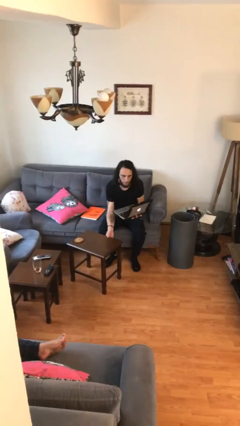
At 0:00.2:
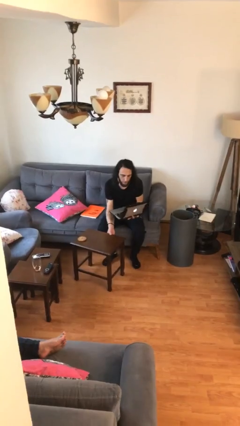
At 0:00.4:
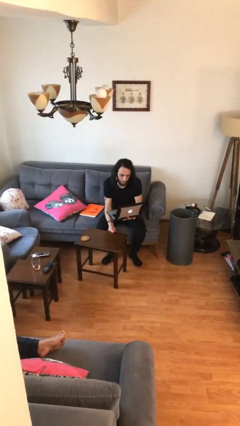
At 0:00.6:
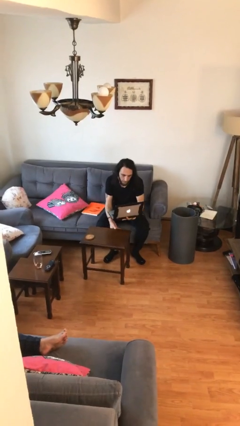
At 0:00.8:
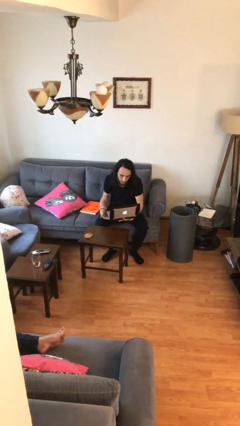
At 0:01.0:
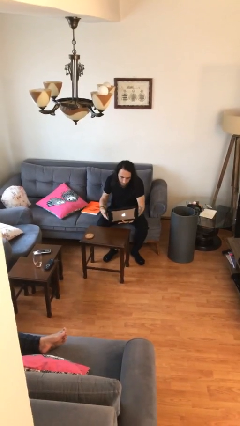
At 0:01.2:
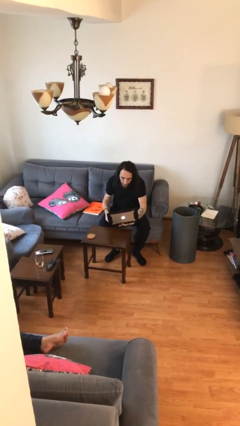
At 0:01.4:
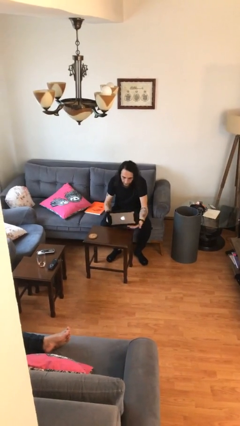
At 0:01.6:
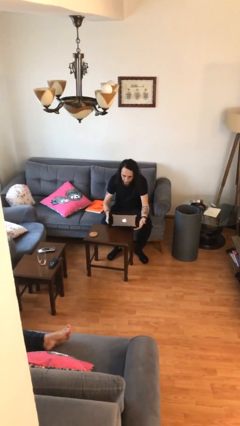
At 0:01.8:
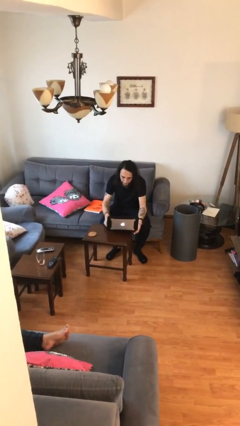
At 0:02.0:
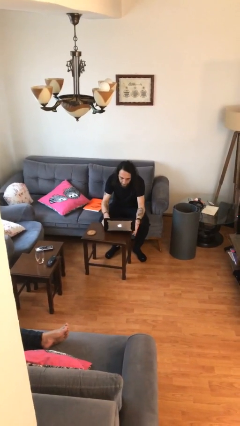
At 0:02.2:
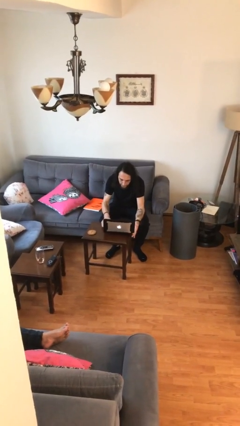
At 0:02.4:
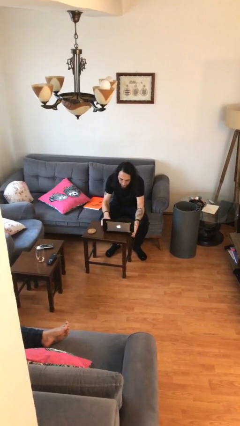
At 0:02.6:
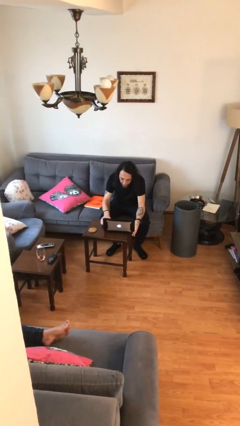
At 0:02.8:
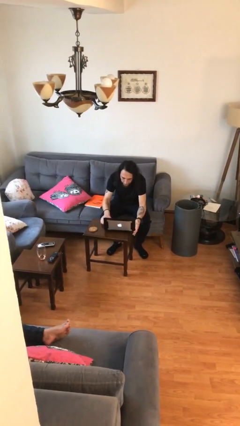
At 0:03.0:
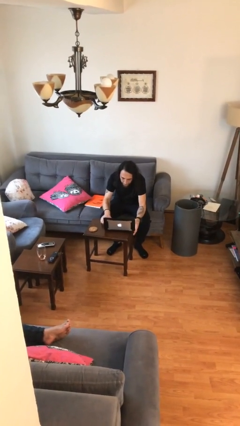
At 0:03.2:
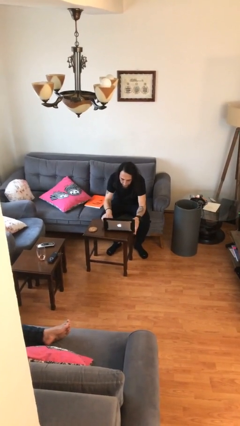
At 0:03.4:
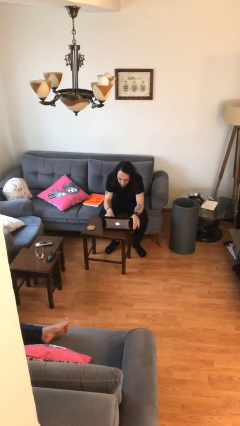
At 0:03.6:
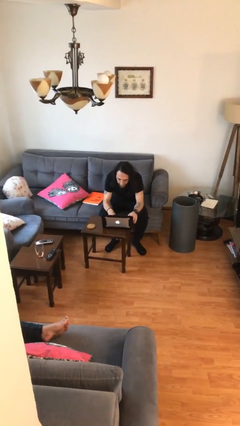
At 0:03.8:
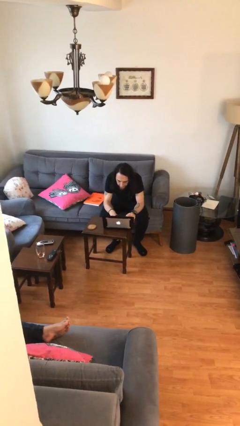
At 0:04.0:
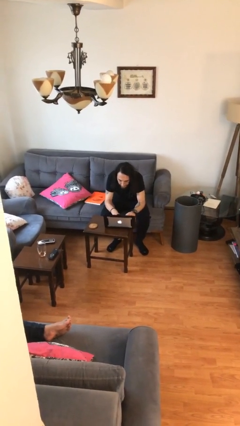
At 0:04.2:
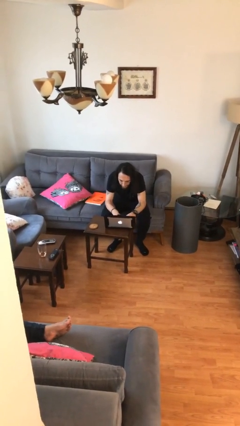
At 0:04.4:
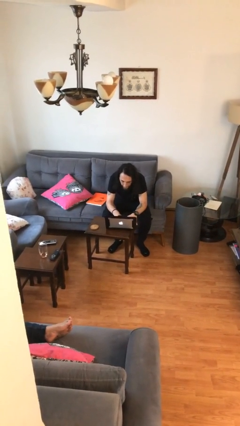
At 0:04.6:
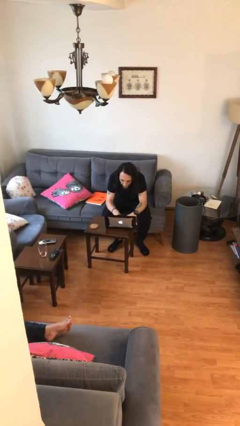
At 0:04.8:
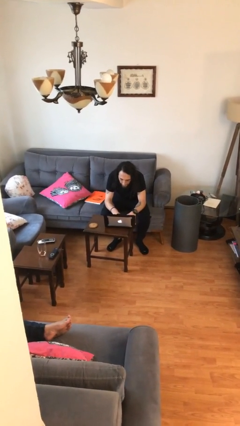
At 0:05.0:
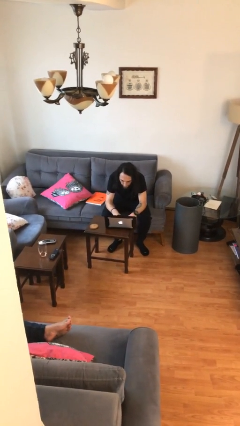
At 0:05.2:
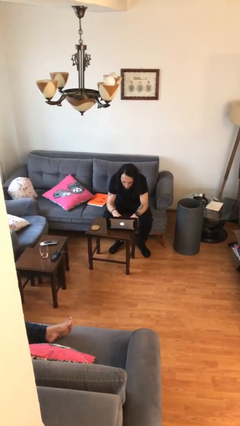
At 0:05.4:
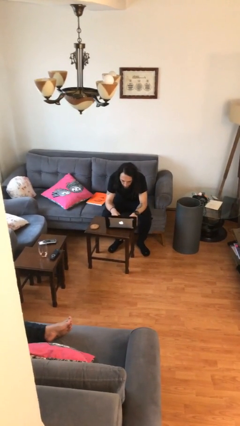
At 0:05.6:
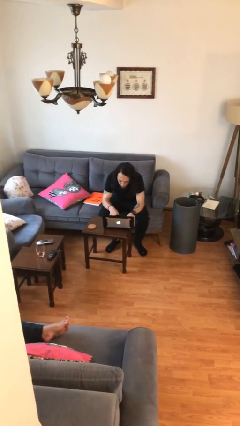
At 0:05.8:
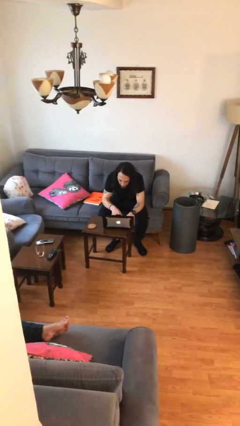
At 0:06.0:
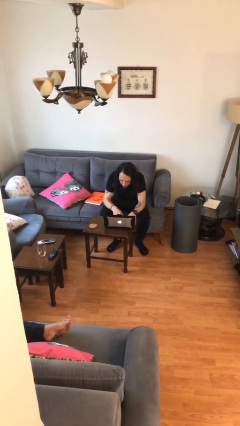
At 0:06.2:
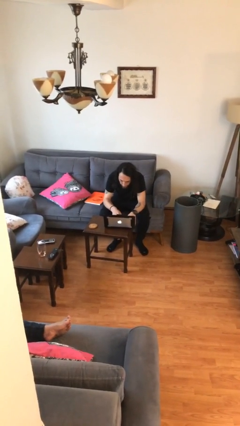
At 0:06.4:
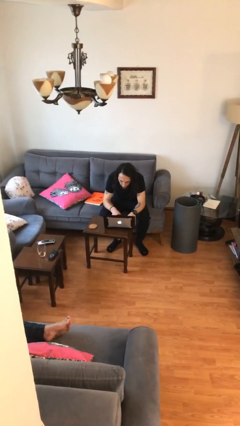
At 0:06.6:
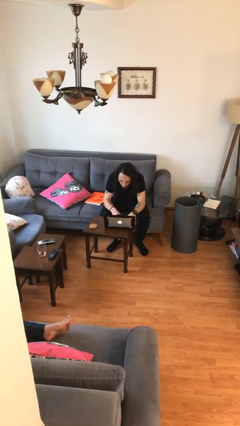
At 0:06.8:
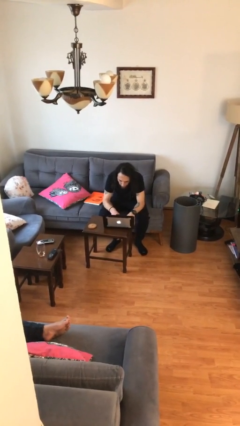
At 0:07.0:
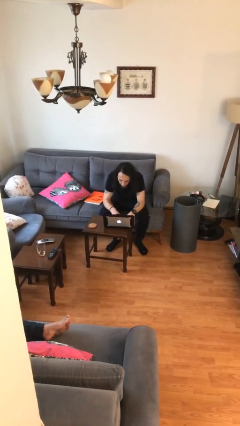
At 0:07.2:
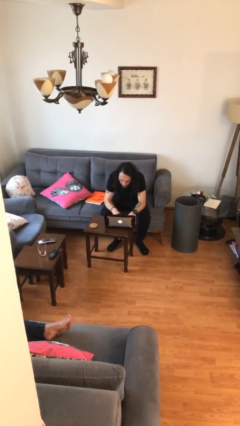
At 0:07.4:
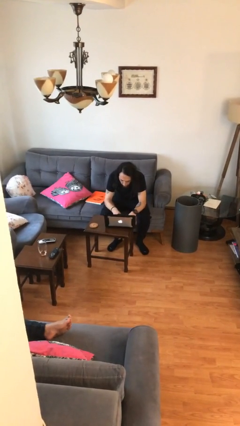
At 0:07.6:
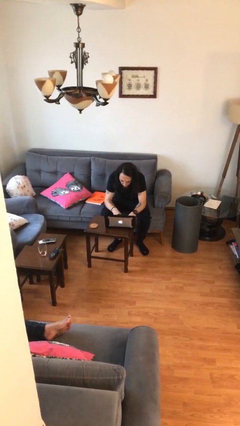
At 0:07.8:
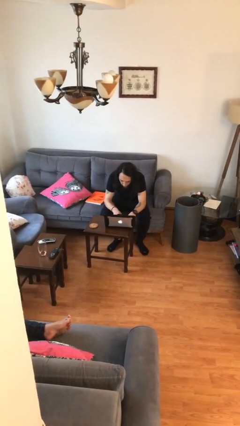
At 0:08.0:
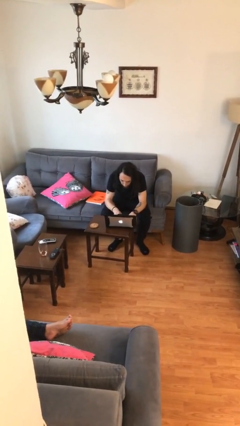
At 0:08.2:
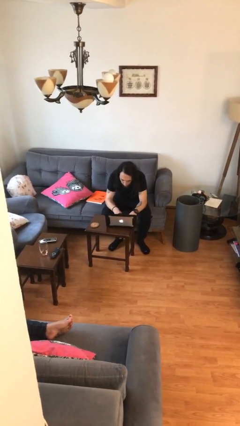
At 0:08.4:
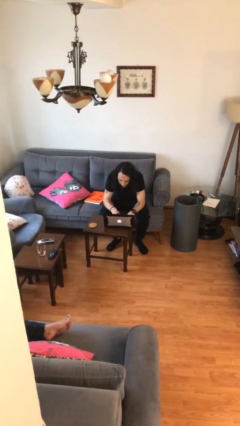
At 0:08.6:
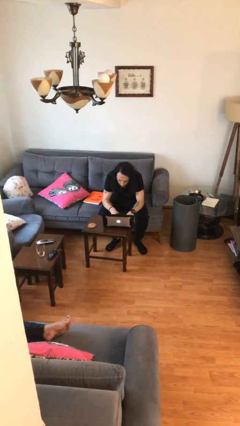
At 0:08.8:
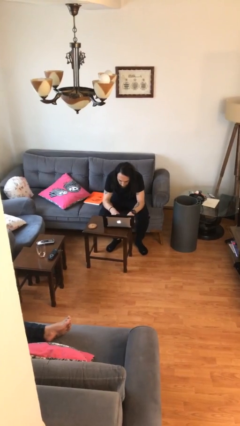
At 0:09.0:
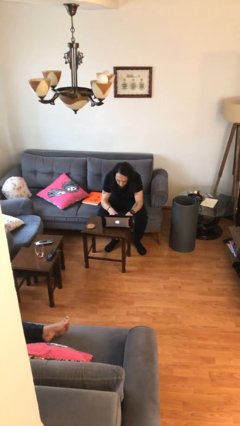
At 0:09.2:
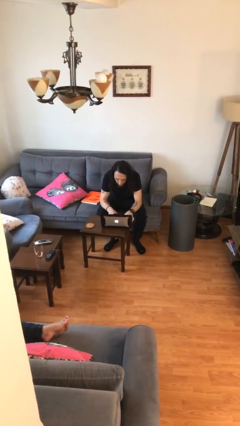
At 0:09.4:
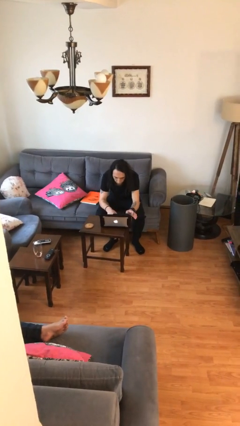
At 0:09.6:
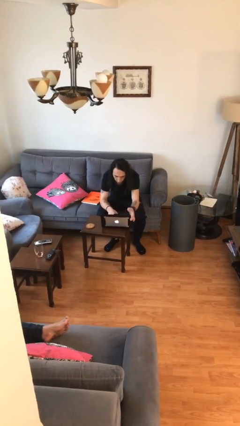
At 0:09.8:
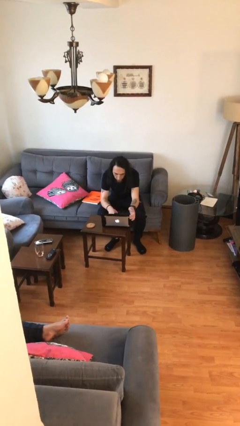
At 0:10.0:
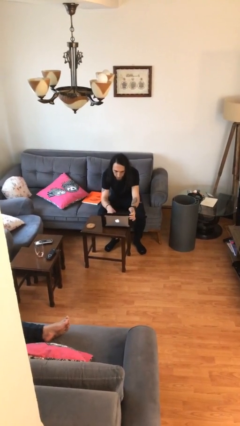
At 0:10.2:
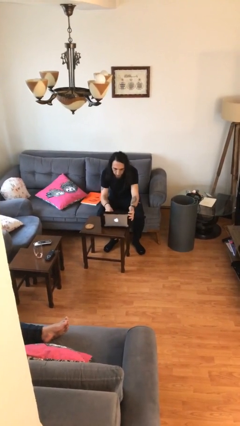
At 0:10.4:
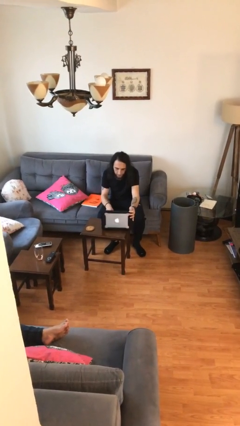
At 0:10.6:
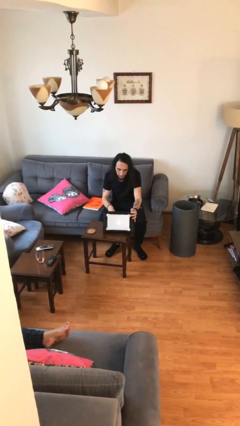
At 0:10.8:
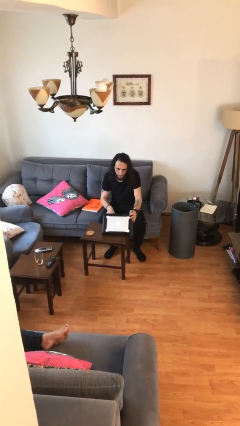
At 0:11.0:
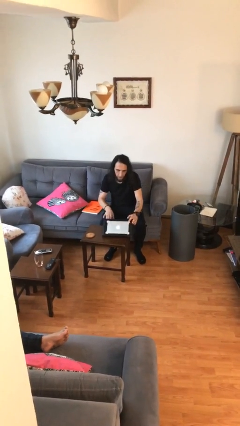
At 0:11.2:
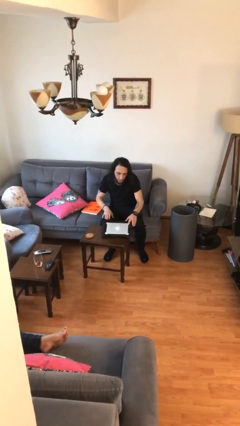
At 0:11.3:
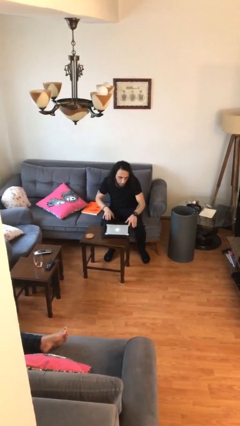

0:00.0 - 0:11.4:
person interacts with laptop

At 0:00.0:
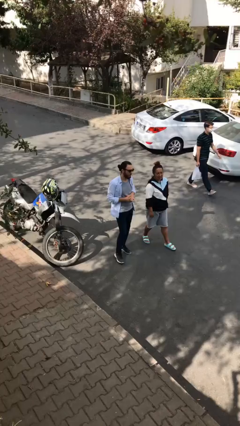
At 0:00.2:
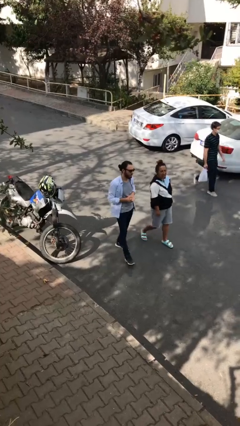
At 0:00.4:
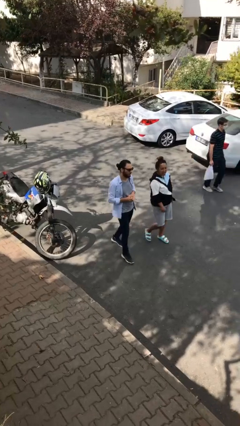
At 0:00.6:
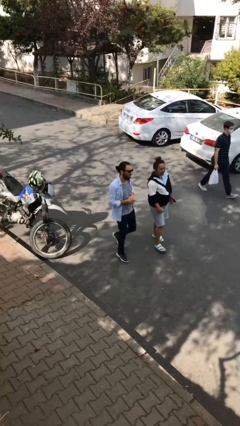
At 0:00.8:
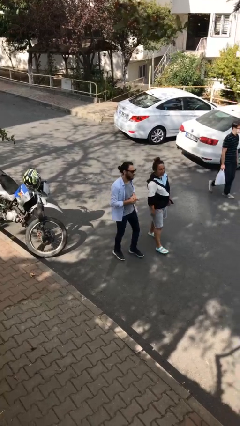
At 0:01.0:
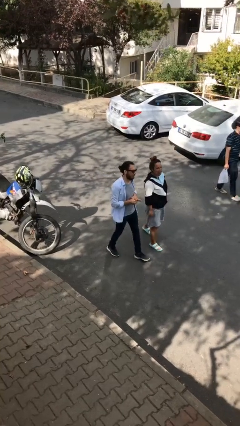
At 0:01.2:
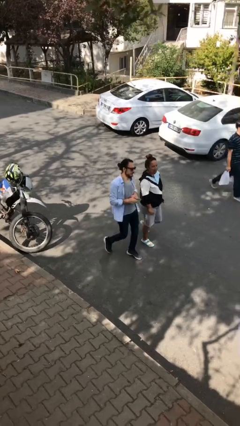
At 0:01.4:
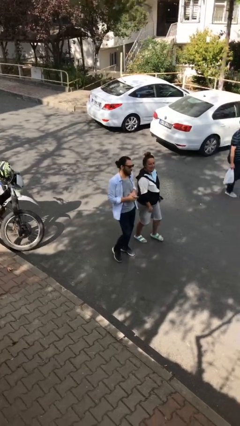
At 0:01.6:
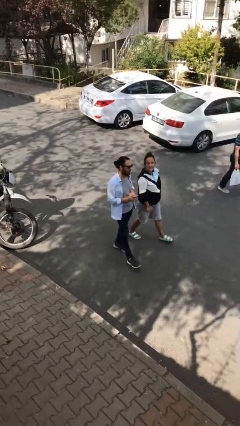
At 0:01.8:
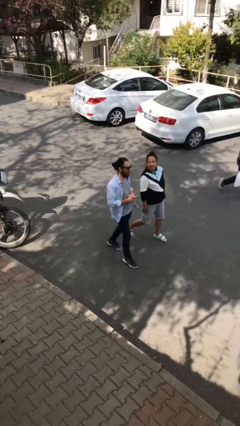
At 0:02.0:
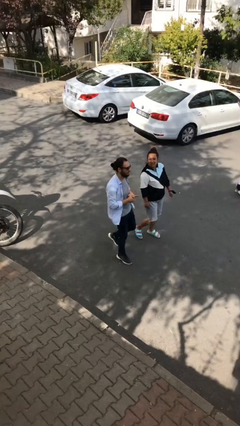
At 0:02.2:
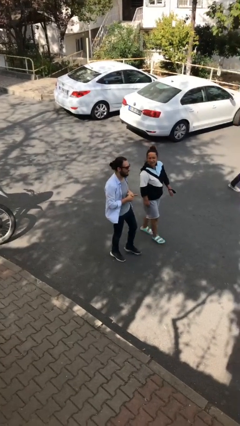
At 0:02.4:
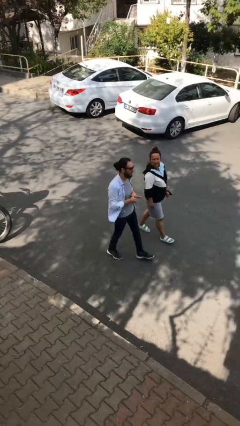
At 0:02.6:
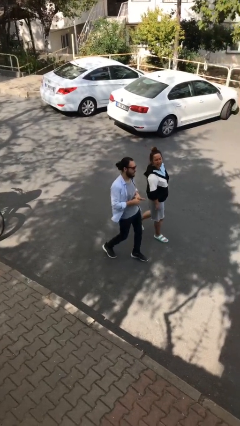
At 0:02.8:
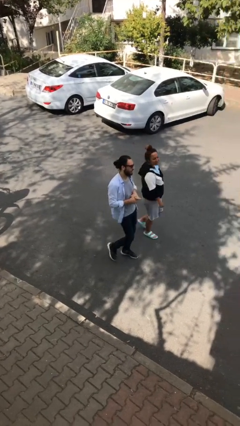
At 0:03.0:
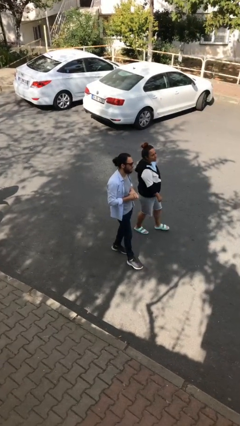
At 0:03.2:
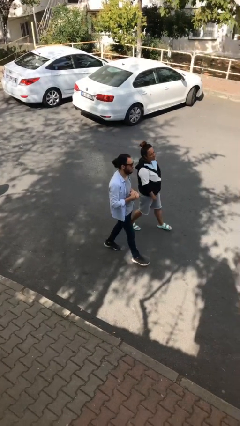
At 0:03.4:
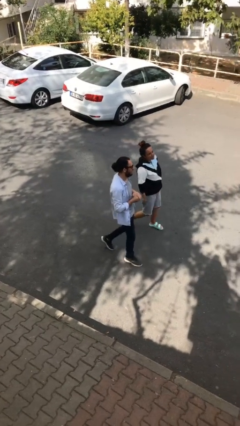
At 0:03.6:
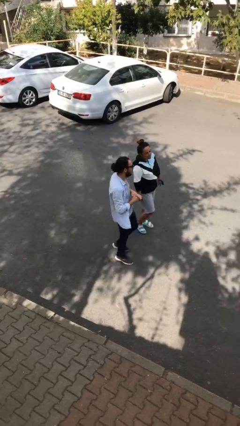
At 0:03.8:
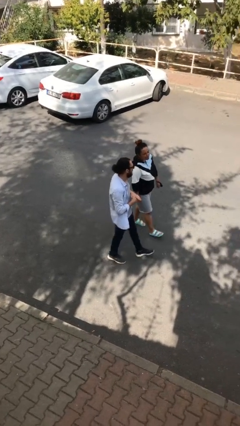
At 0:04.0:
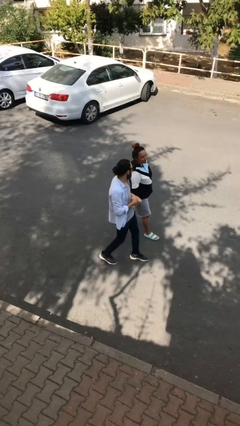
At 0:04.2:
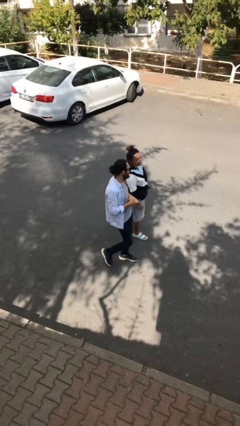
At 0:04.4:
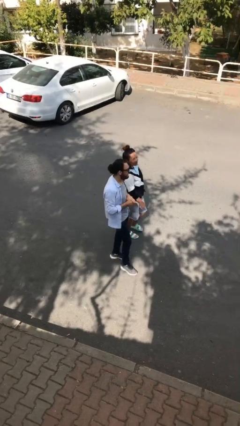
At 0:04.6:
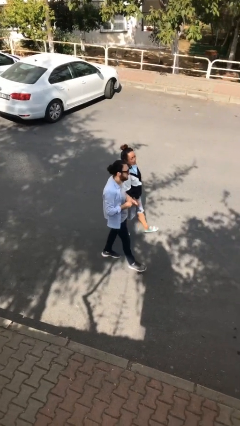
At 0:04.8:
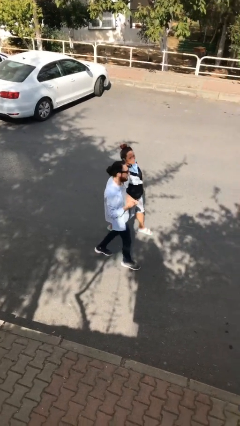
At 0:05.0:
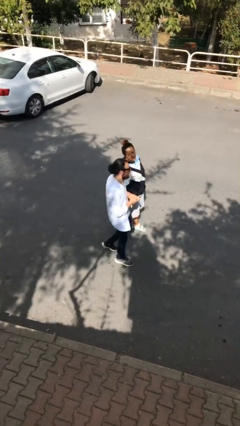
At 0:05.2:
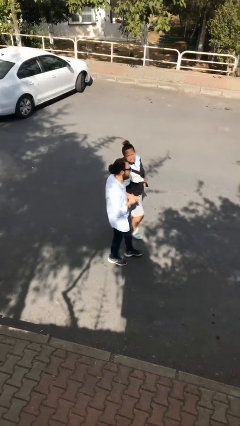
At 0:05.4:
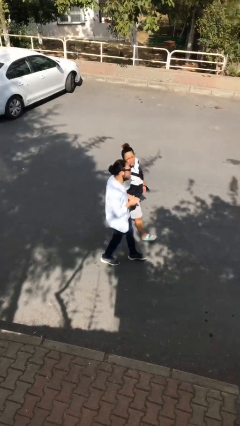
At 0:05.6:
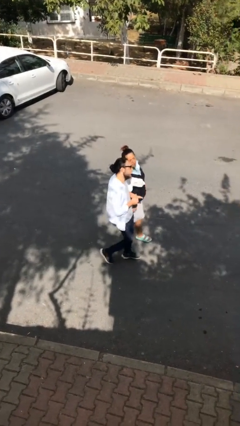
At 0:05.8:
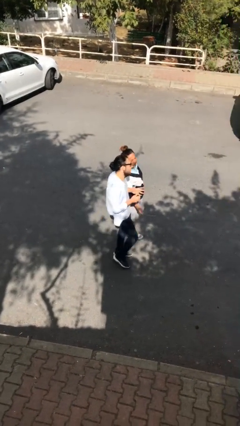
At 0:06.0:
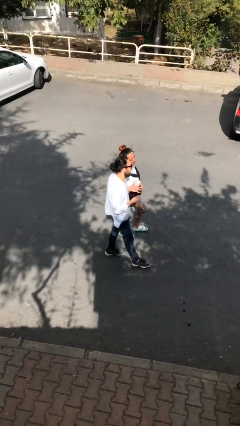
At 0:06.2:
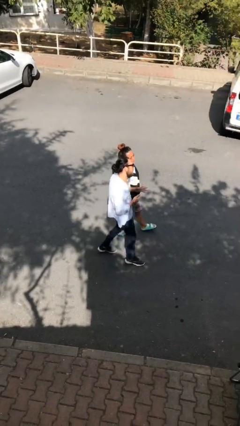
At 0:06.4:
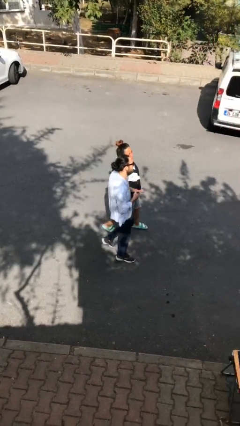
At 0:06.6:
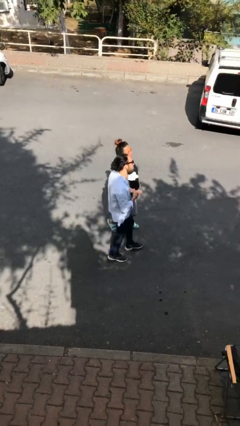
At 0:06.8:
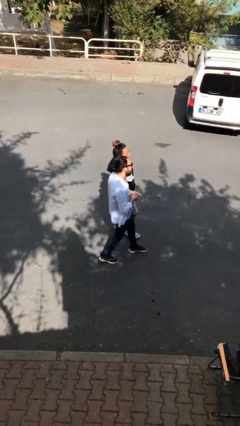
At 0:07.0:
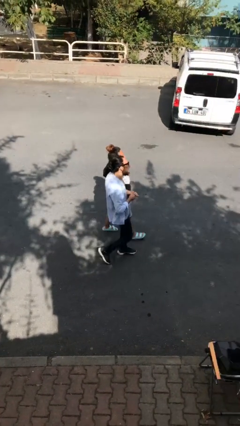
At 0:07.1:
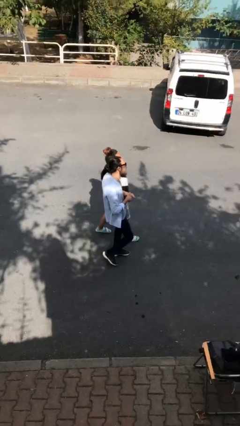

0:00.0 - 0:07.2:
person talks to person
